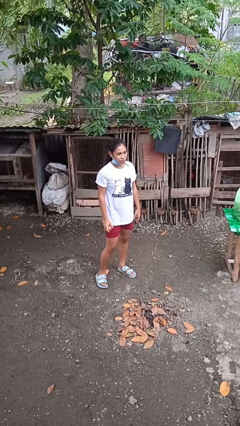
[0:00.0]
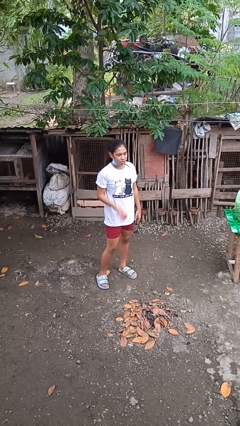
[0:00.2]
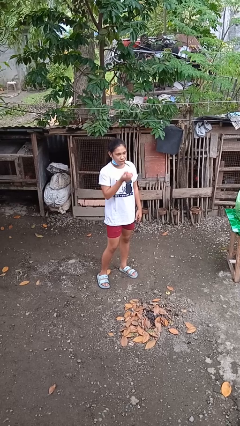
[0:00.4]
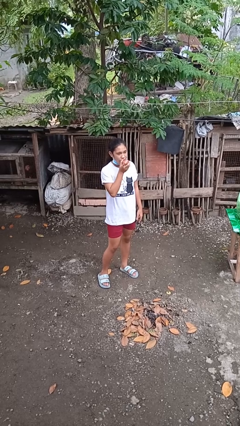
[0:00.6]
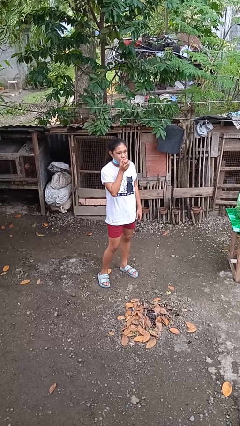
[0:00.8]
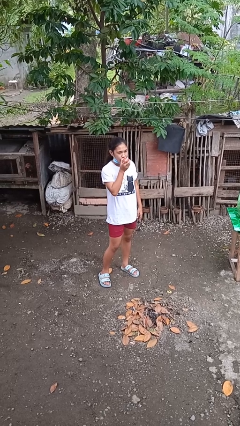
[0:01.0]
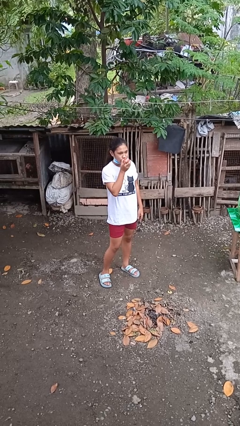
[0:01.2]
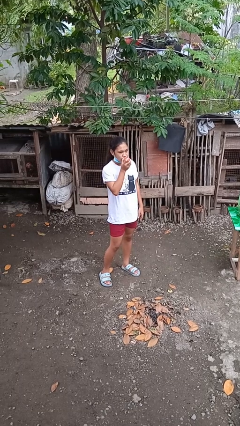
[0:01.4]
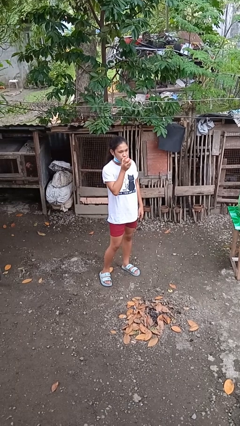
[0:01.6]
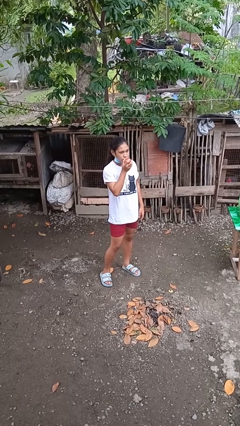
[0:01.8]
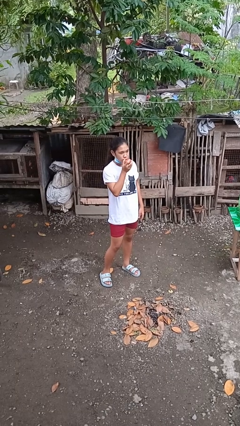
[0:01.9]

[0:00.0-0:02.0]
person eats apple

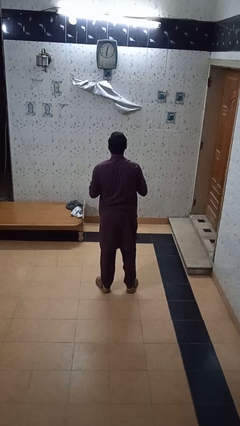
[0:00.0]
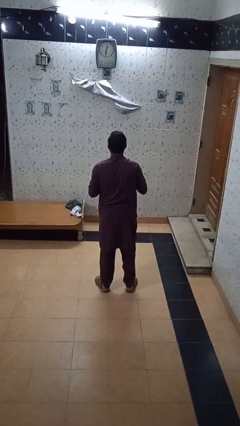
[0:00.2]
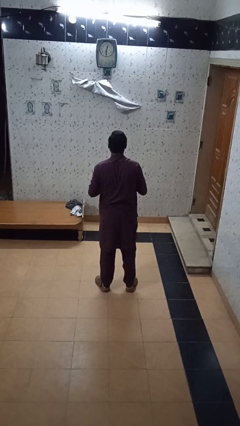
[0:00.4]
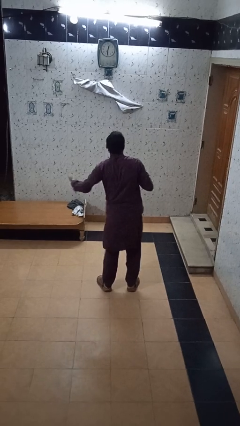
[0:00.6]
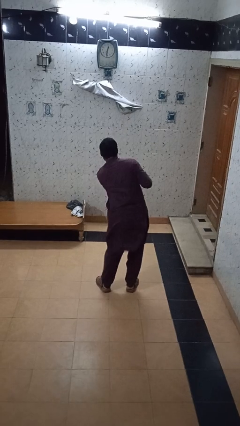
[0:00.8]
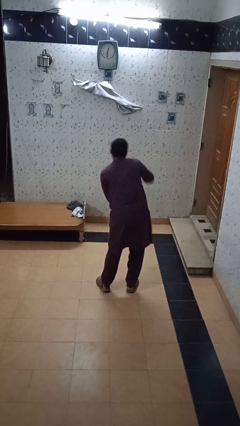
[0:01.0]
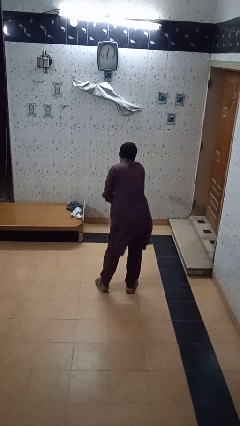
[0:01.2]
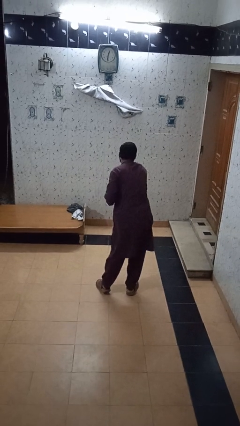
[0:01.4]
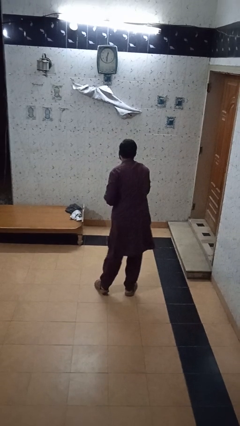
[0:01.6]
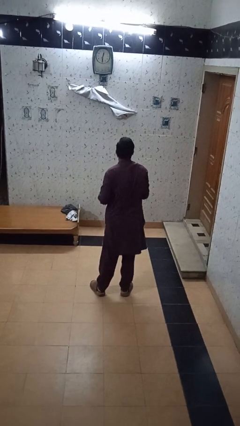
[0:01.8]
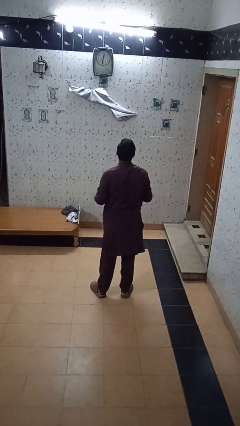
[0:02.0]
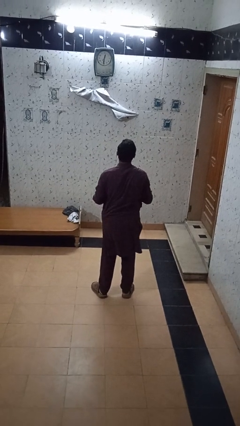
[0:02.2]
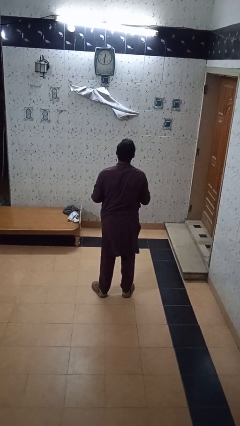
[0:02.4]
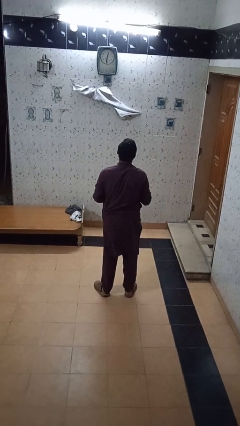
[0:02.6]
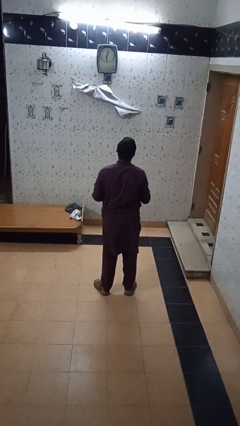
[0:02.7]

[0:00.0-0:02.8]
person punches

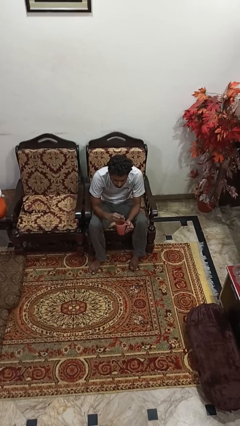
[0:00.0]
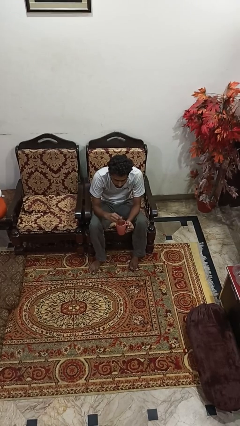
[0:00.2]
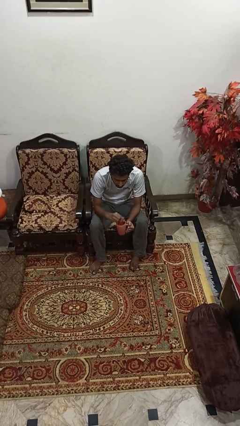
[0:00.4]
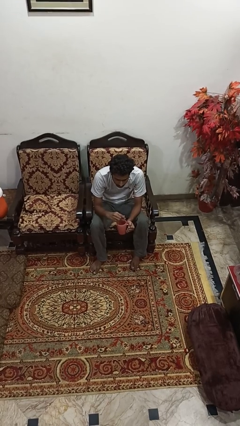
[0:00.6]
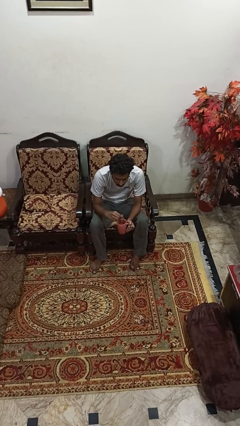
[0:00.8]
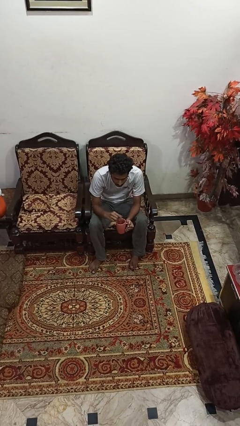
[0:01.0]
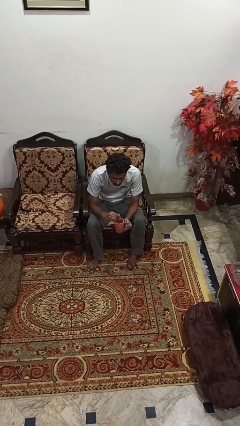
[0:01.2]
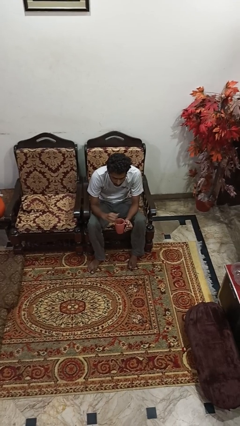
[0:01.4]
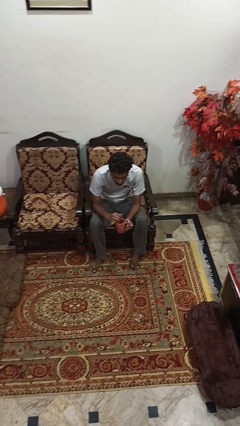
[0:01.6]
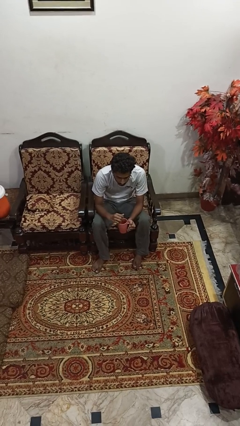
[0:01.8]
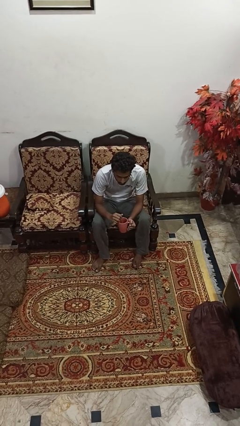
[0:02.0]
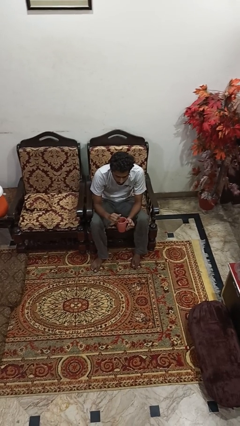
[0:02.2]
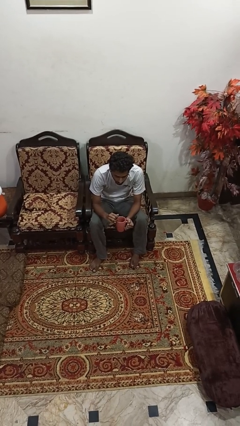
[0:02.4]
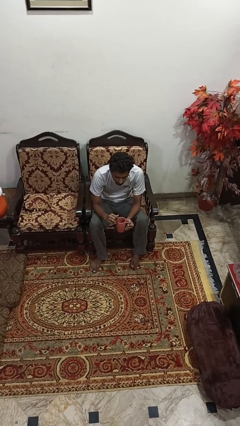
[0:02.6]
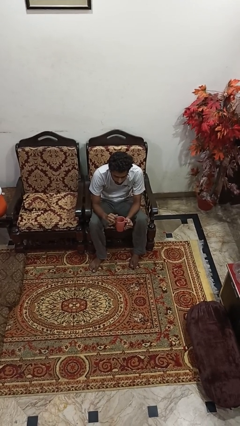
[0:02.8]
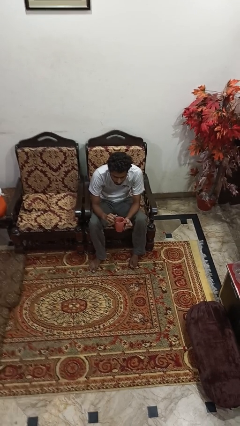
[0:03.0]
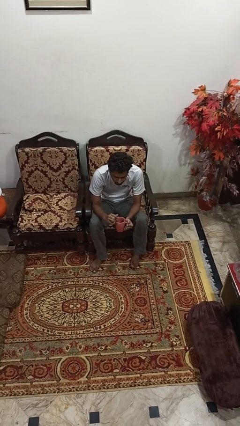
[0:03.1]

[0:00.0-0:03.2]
person stirs mug

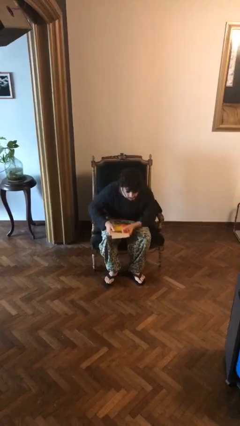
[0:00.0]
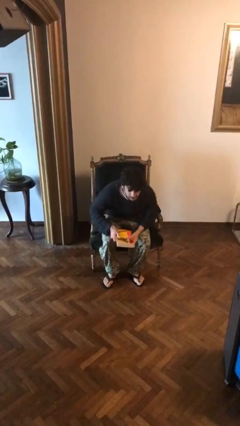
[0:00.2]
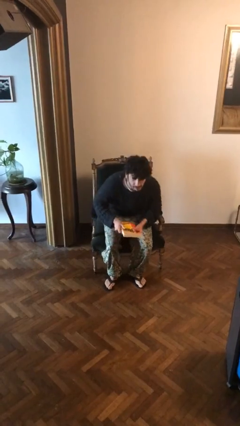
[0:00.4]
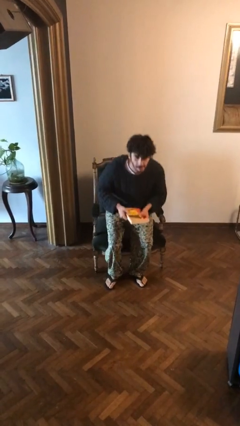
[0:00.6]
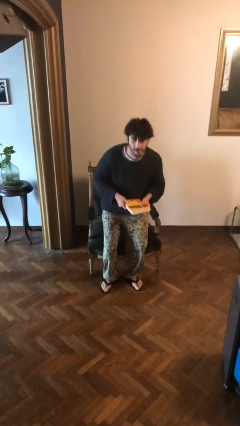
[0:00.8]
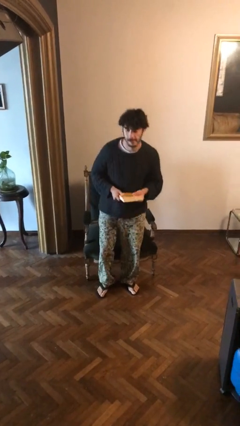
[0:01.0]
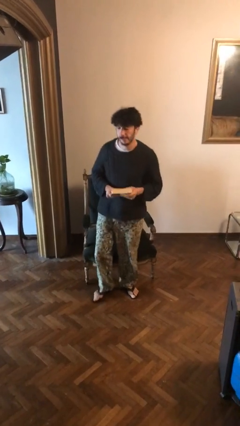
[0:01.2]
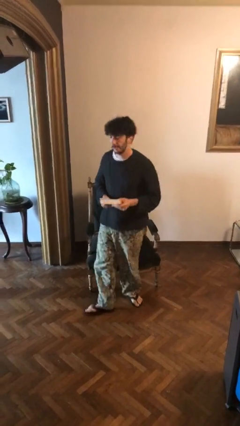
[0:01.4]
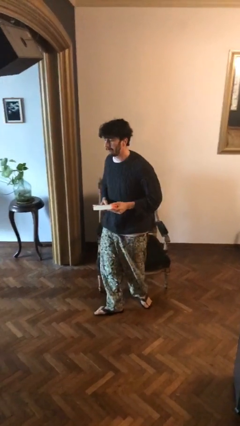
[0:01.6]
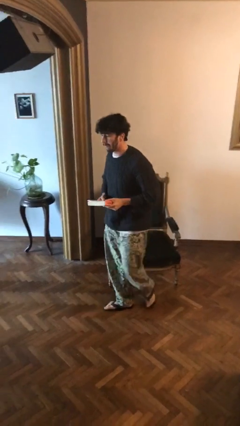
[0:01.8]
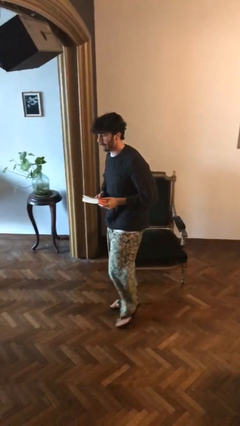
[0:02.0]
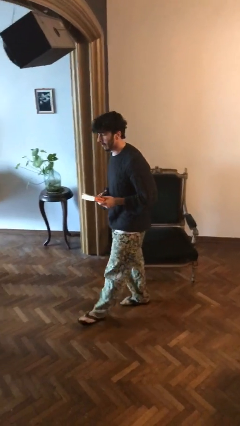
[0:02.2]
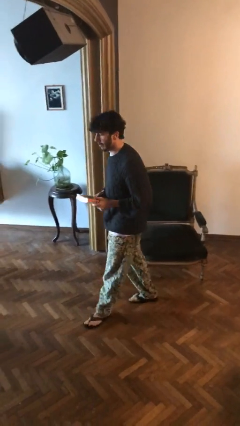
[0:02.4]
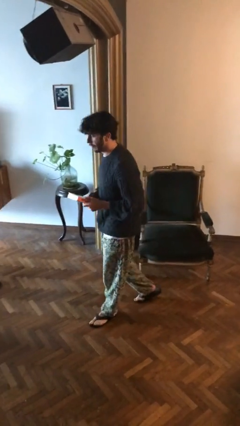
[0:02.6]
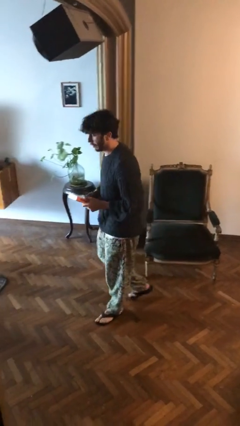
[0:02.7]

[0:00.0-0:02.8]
person stands up

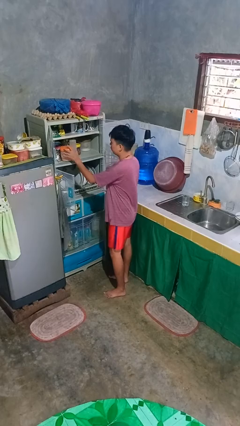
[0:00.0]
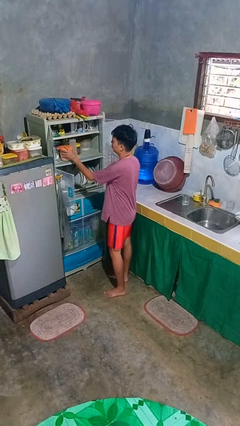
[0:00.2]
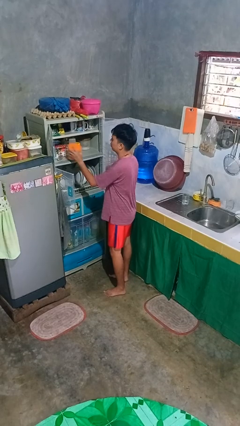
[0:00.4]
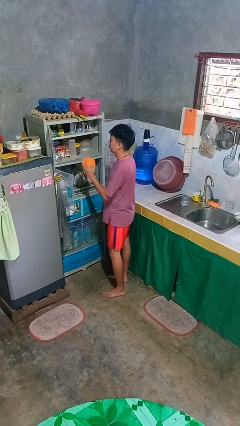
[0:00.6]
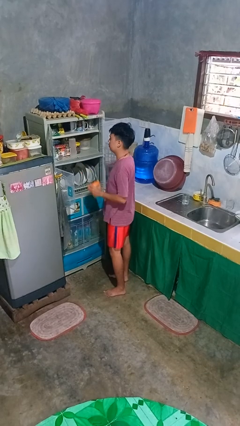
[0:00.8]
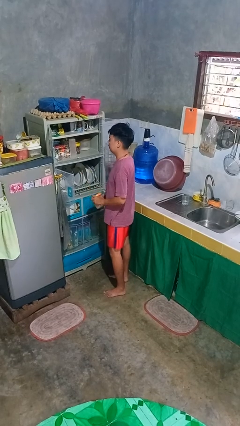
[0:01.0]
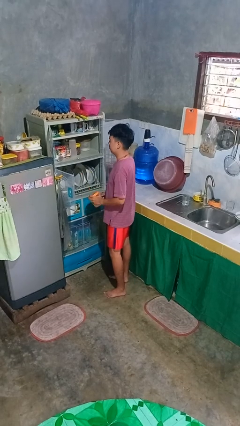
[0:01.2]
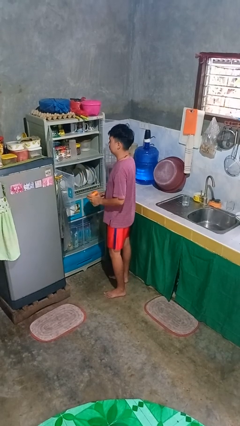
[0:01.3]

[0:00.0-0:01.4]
person takes object from cabinet

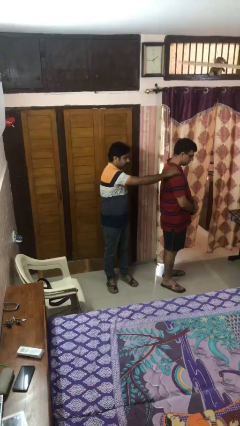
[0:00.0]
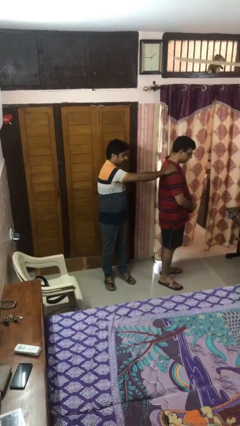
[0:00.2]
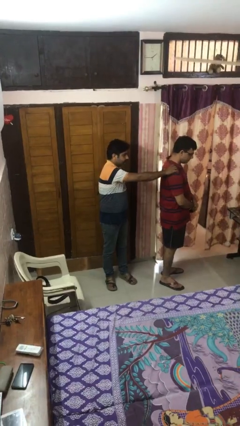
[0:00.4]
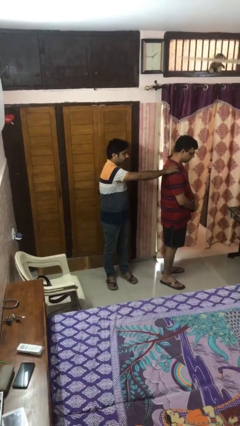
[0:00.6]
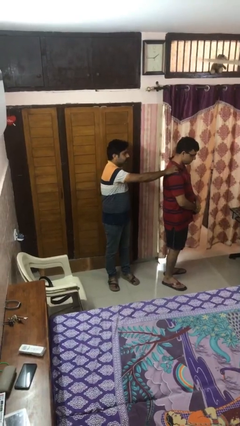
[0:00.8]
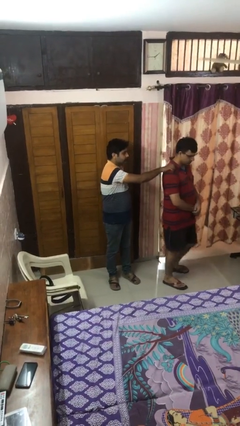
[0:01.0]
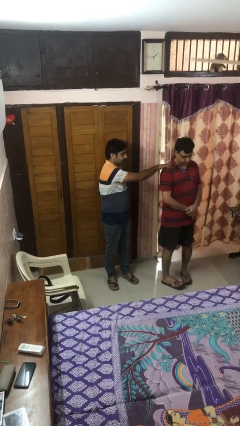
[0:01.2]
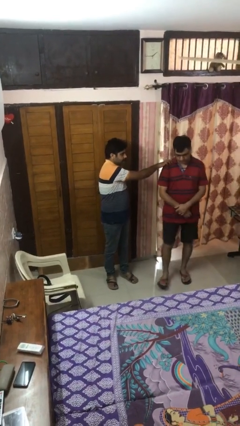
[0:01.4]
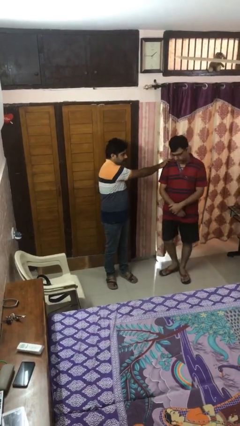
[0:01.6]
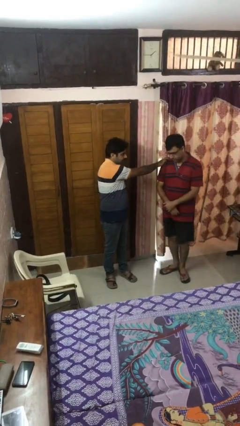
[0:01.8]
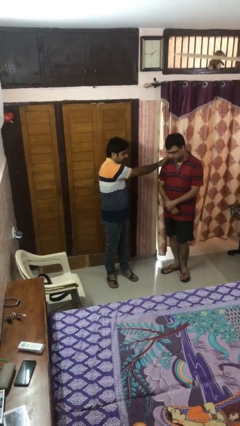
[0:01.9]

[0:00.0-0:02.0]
person spins person around

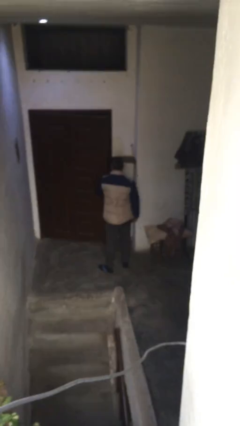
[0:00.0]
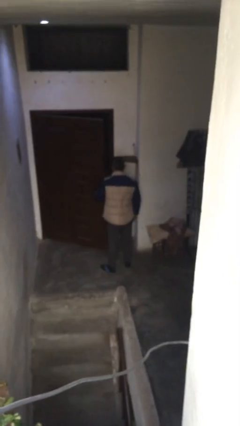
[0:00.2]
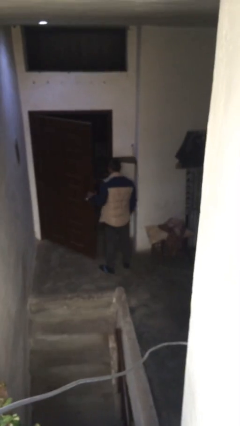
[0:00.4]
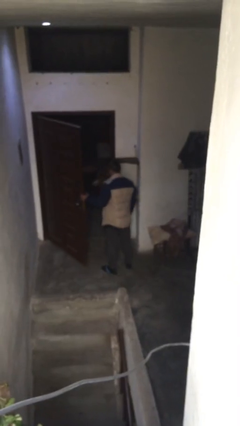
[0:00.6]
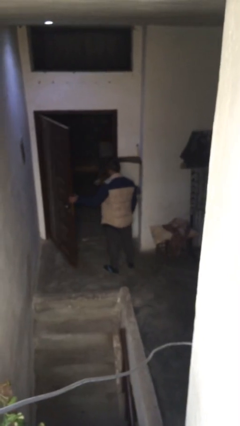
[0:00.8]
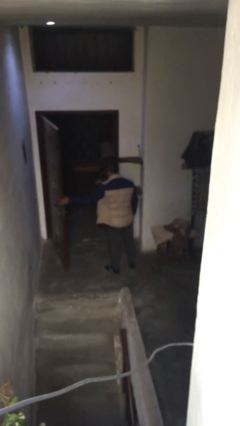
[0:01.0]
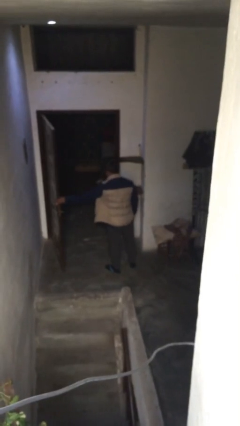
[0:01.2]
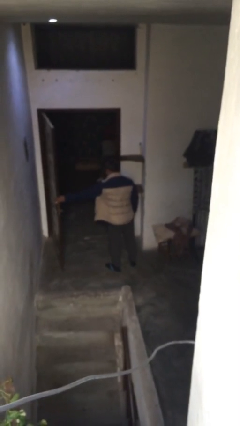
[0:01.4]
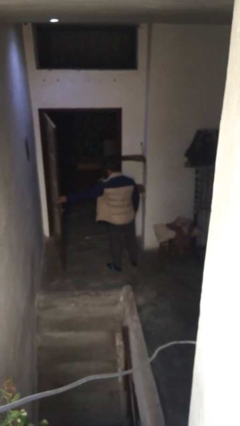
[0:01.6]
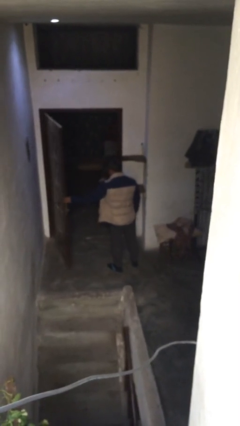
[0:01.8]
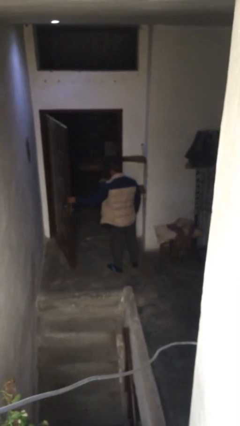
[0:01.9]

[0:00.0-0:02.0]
person opens facility door

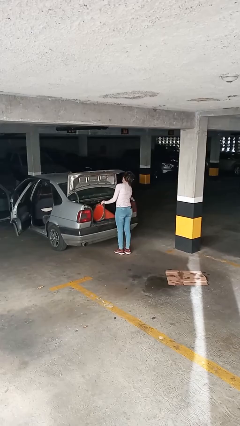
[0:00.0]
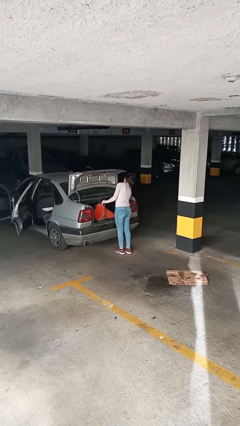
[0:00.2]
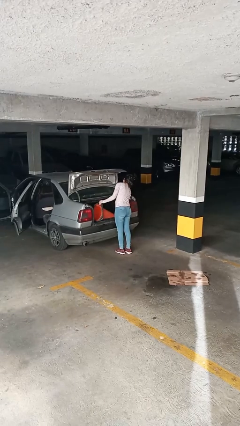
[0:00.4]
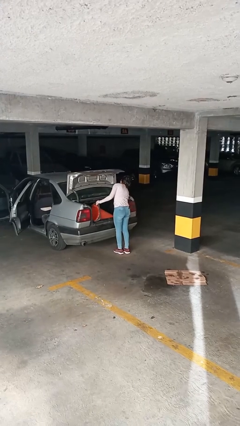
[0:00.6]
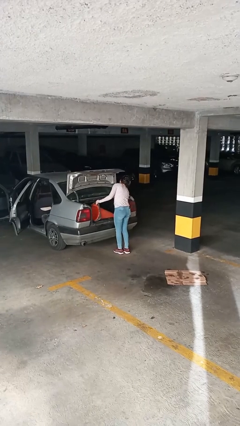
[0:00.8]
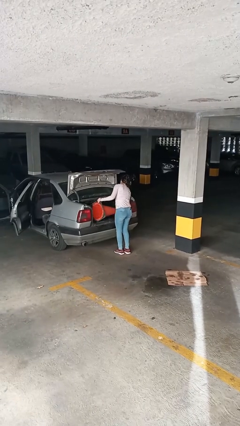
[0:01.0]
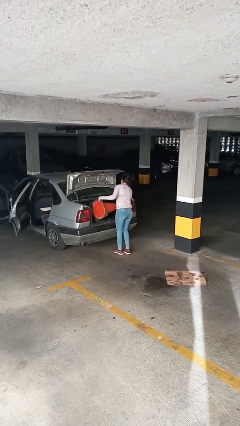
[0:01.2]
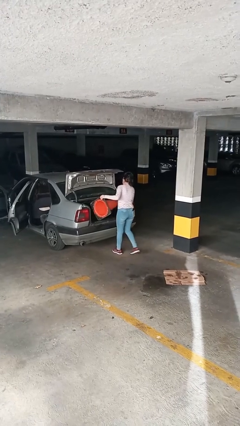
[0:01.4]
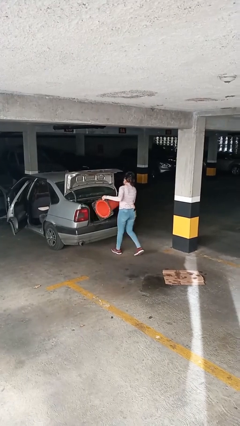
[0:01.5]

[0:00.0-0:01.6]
person unloads car
